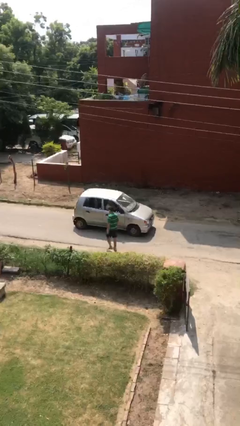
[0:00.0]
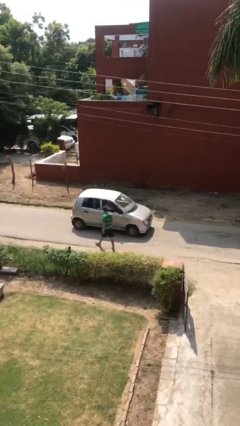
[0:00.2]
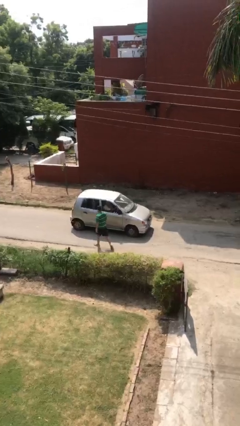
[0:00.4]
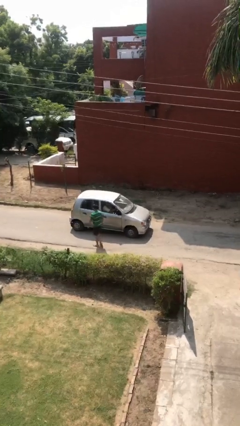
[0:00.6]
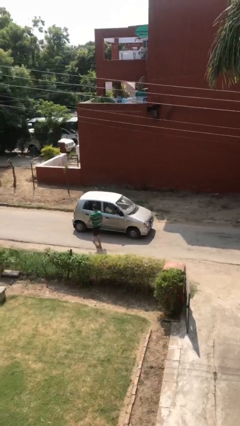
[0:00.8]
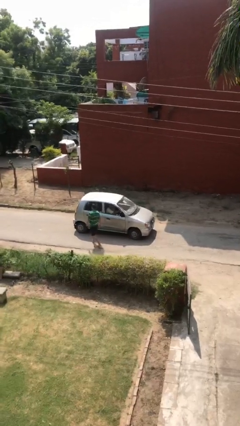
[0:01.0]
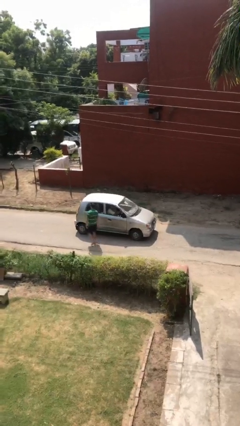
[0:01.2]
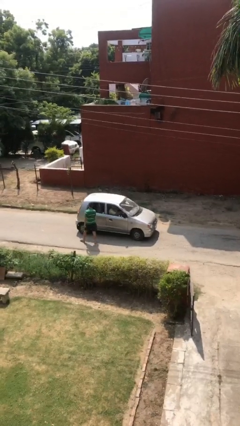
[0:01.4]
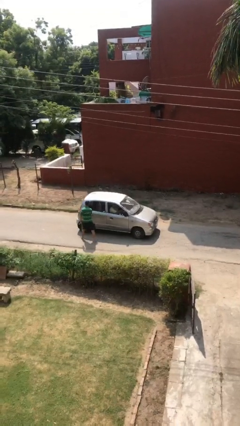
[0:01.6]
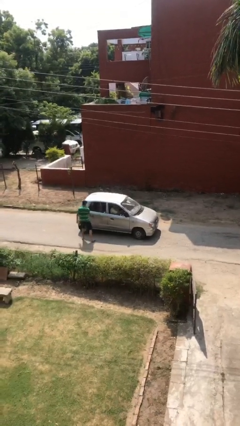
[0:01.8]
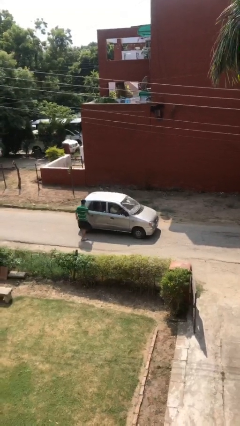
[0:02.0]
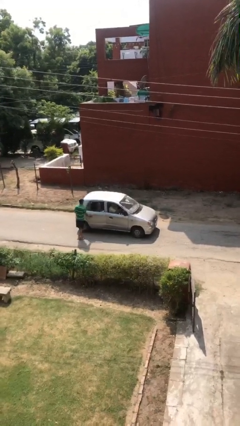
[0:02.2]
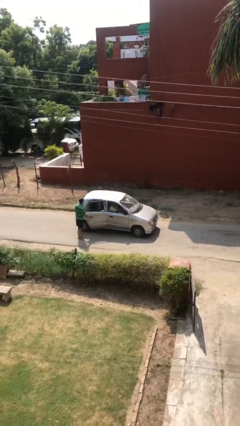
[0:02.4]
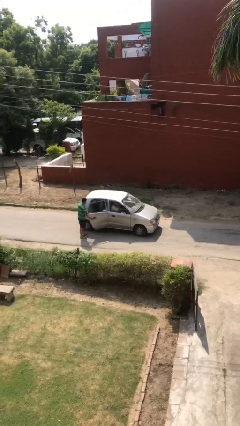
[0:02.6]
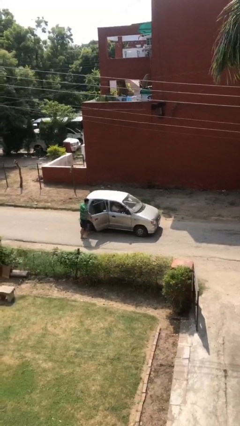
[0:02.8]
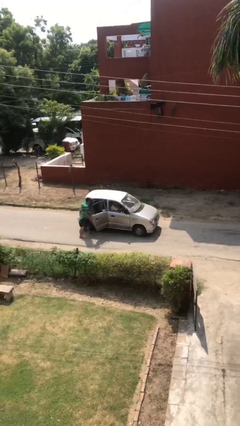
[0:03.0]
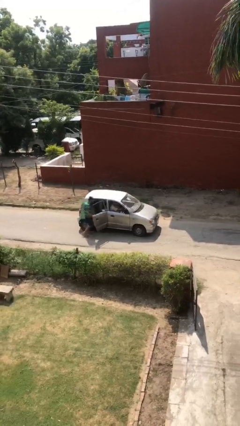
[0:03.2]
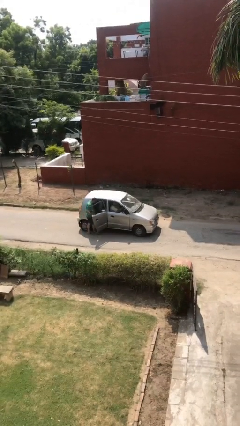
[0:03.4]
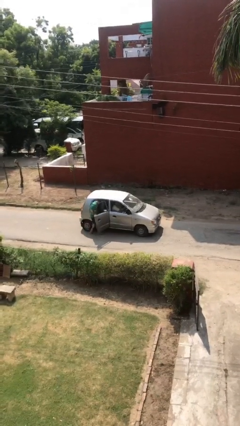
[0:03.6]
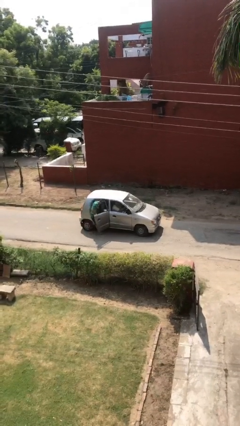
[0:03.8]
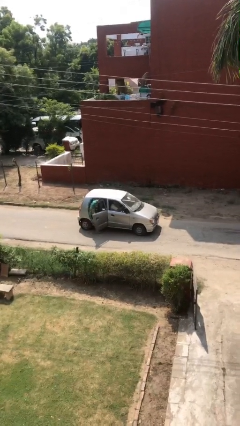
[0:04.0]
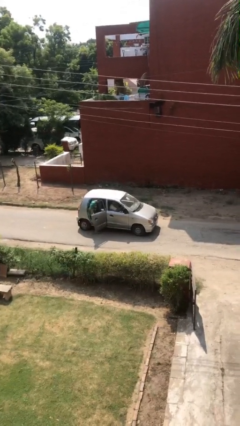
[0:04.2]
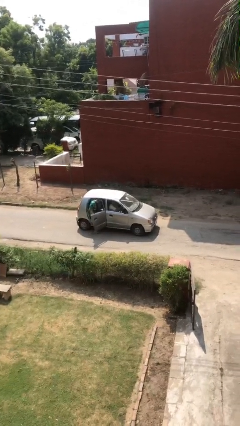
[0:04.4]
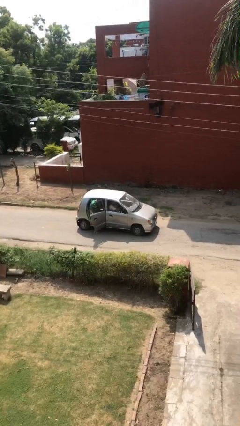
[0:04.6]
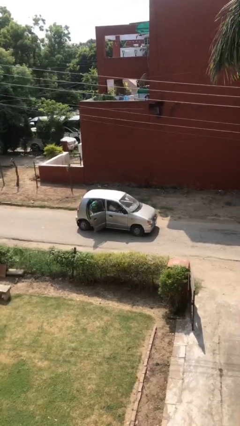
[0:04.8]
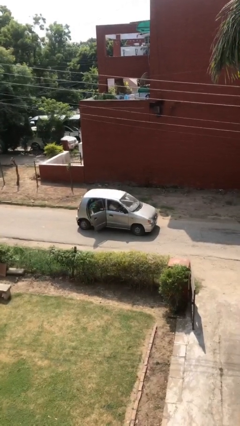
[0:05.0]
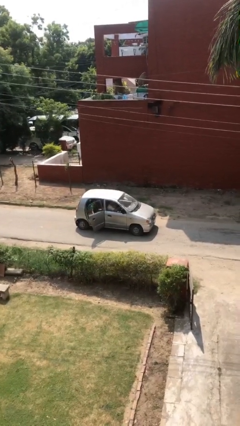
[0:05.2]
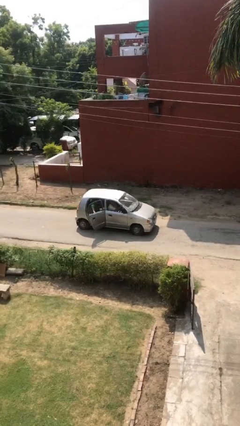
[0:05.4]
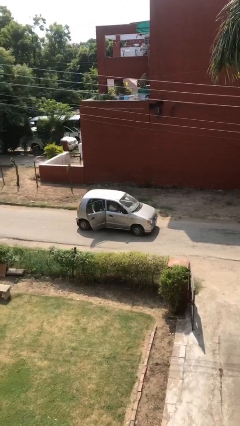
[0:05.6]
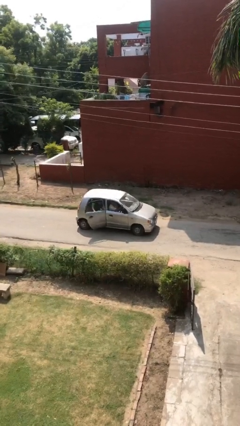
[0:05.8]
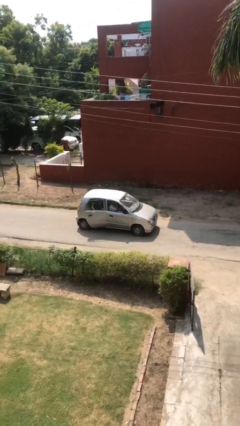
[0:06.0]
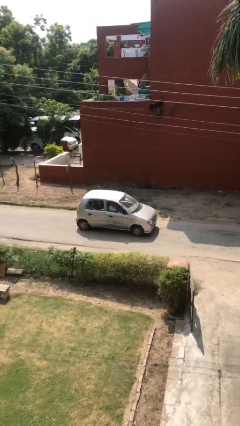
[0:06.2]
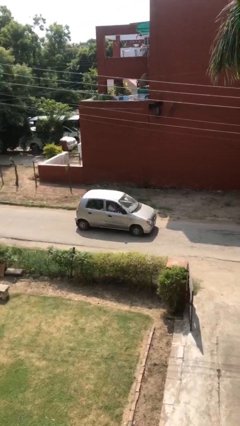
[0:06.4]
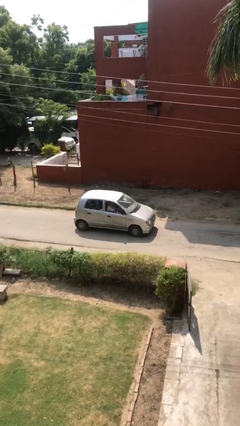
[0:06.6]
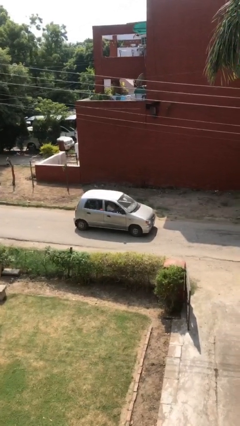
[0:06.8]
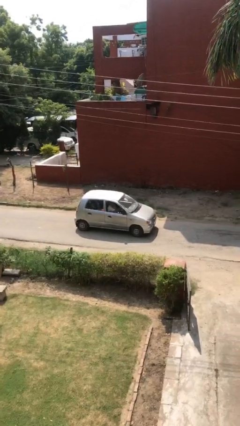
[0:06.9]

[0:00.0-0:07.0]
car picks up person

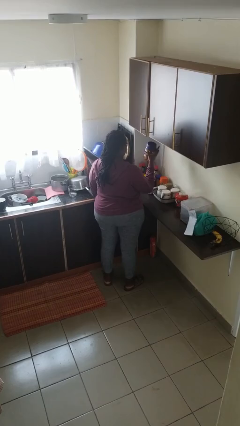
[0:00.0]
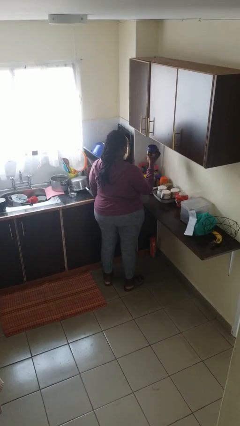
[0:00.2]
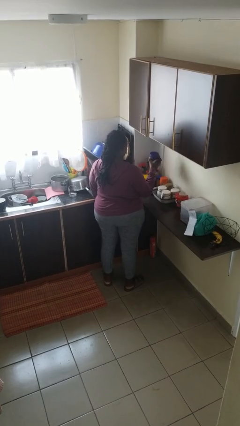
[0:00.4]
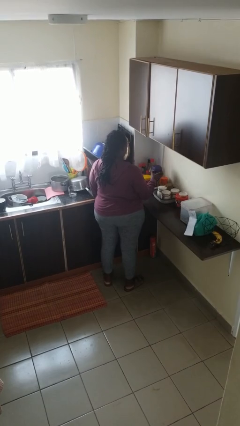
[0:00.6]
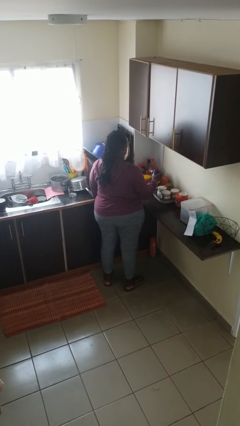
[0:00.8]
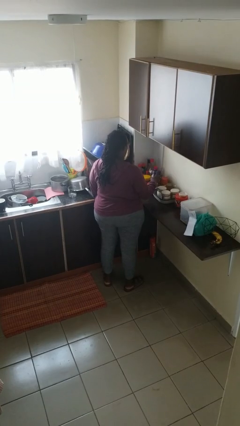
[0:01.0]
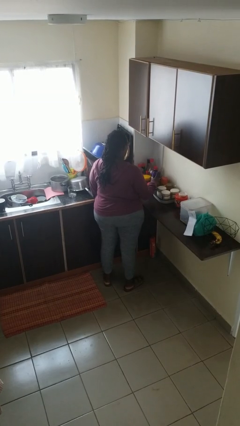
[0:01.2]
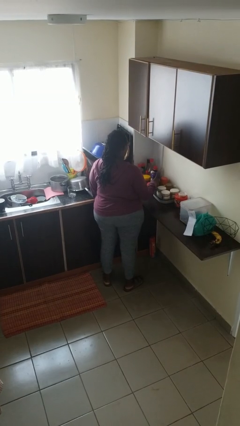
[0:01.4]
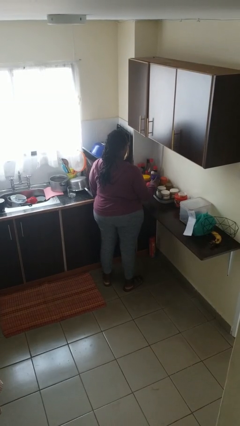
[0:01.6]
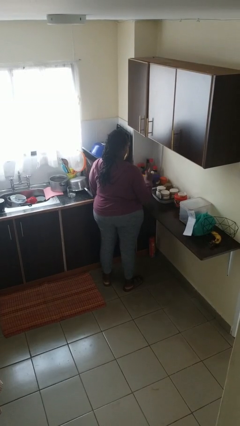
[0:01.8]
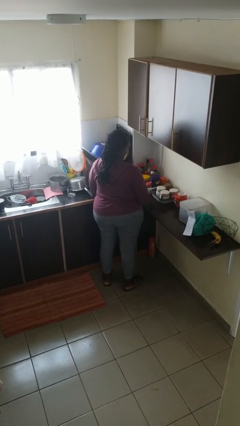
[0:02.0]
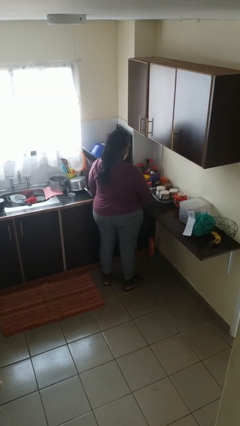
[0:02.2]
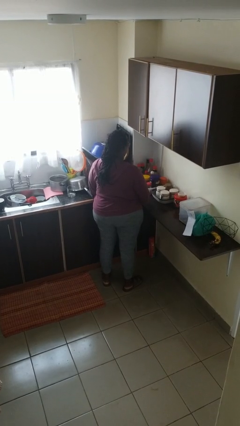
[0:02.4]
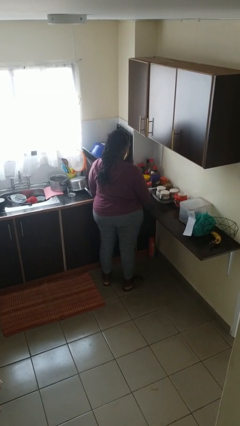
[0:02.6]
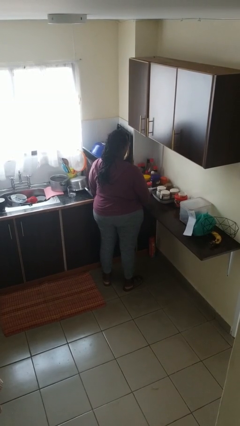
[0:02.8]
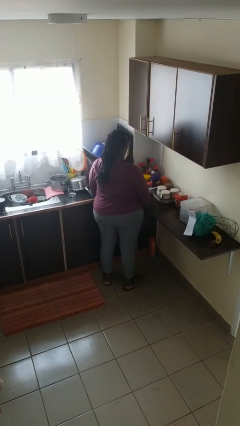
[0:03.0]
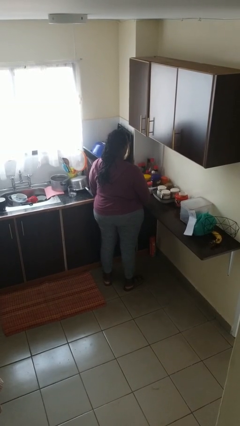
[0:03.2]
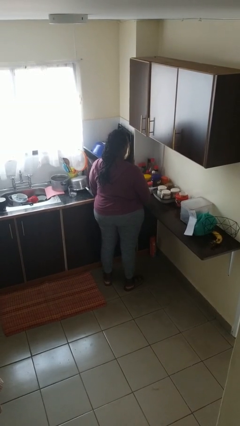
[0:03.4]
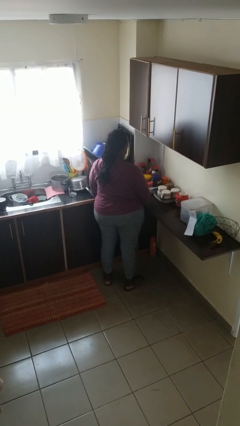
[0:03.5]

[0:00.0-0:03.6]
person puts down object on countertop

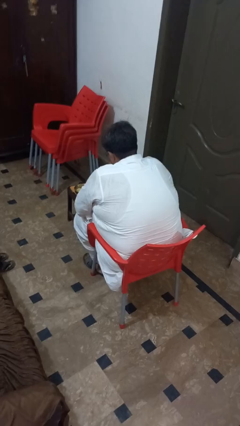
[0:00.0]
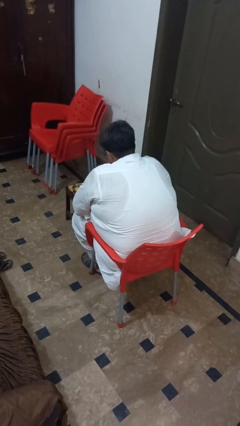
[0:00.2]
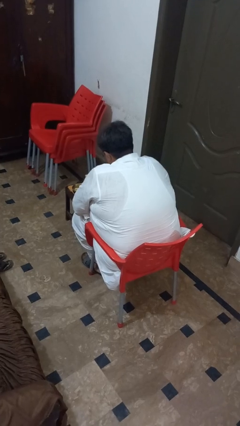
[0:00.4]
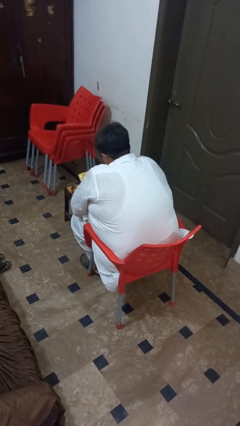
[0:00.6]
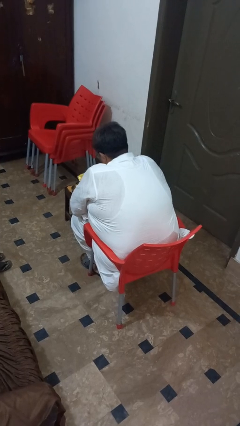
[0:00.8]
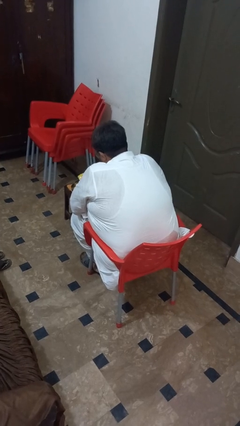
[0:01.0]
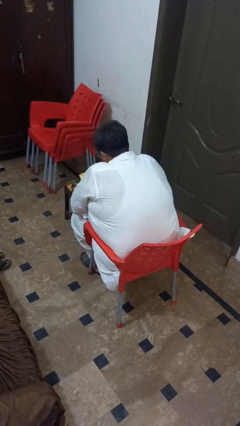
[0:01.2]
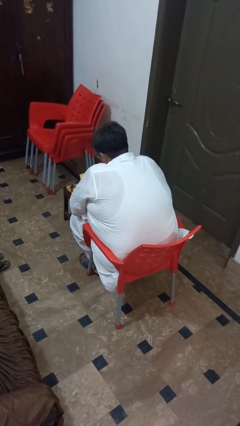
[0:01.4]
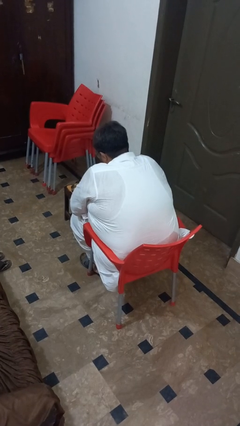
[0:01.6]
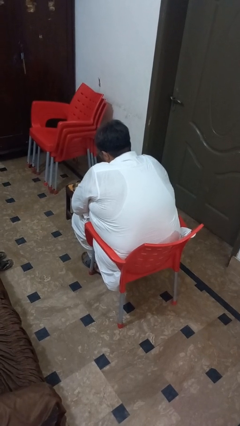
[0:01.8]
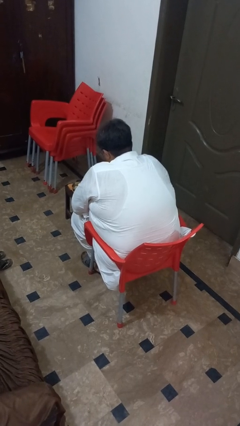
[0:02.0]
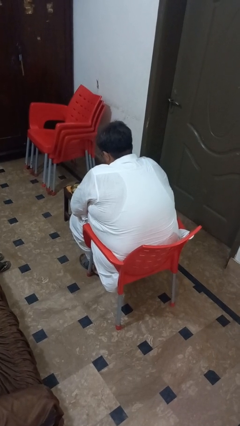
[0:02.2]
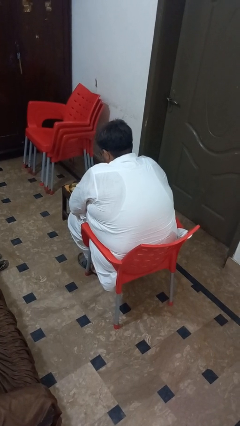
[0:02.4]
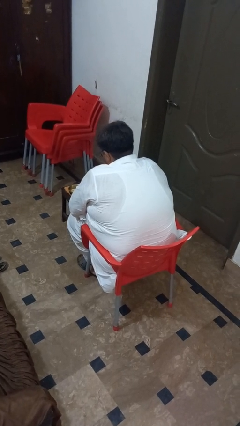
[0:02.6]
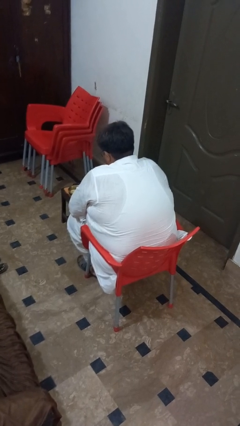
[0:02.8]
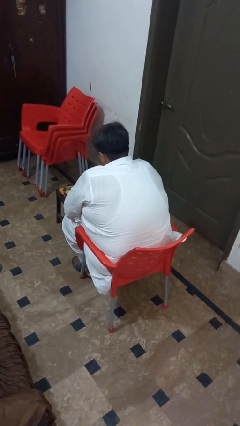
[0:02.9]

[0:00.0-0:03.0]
person pours into bowl

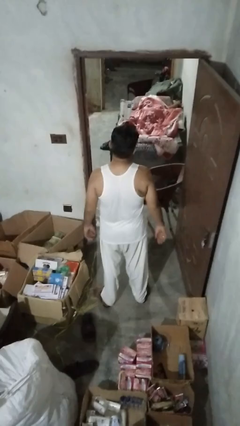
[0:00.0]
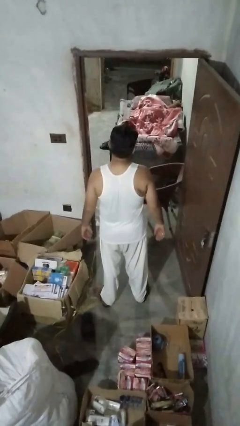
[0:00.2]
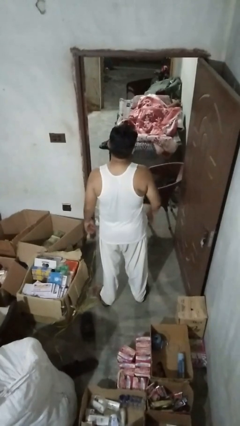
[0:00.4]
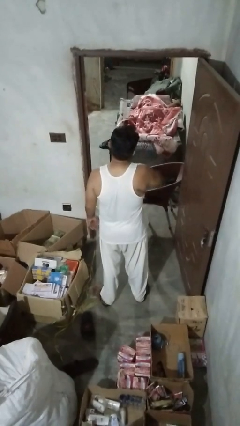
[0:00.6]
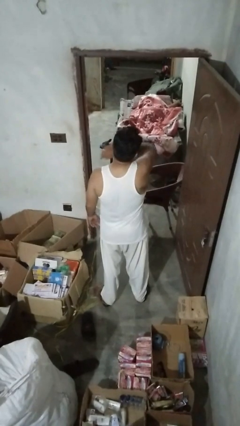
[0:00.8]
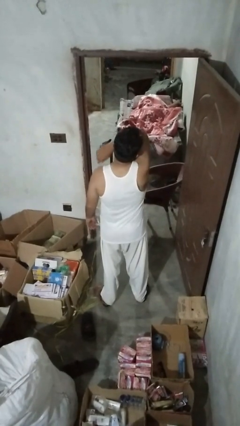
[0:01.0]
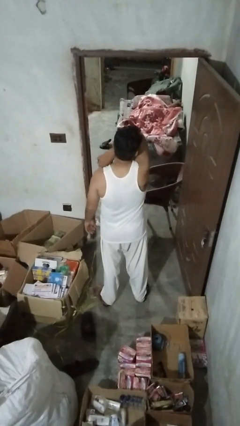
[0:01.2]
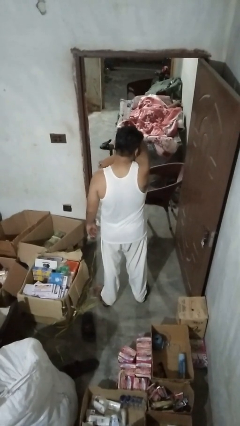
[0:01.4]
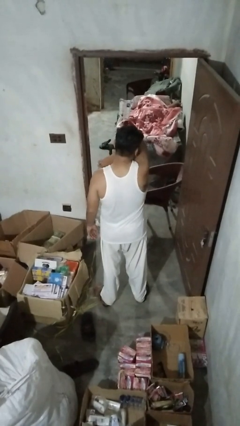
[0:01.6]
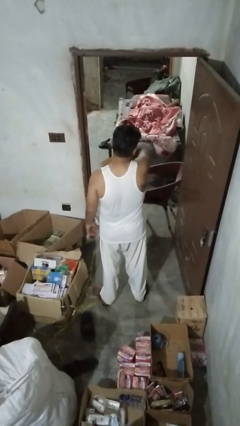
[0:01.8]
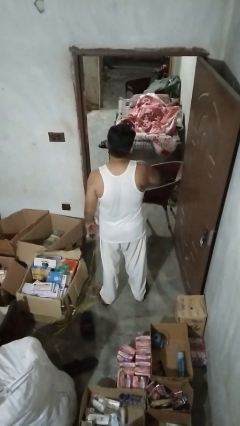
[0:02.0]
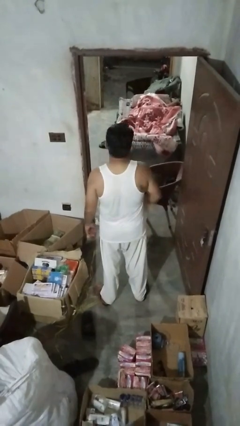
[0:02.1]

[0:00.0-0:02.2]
person sneezes into arm

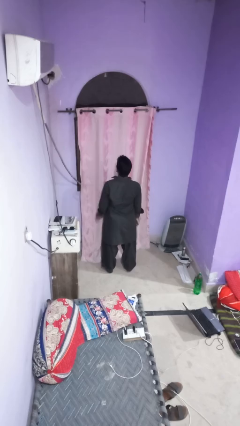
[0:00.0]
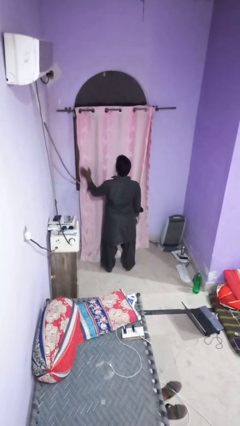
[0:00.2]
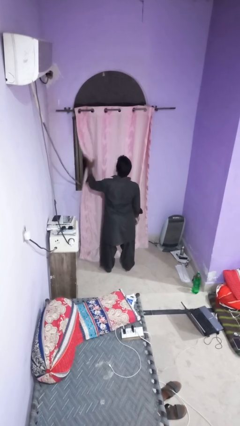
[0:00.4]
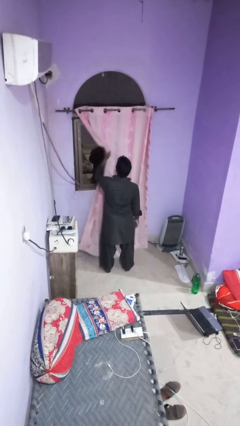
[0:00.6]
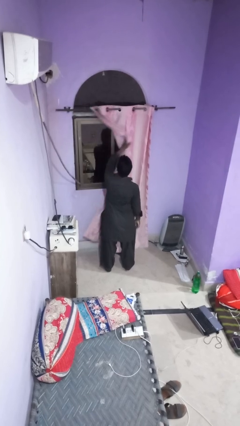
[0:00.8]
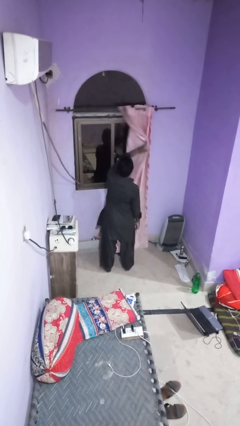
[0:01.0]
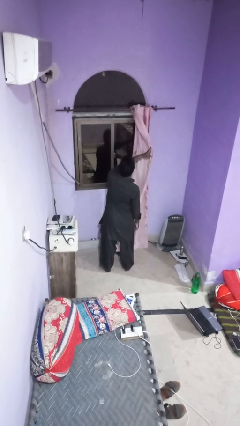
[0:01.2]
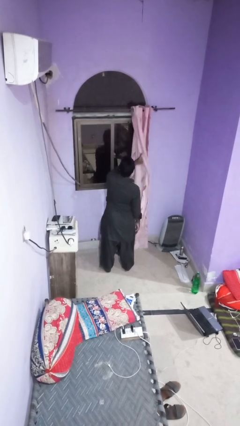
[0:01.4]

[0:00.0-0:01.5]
person opens curtains
